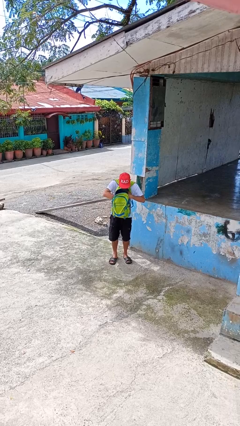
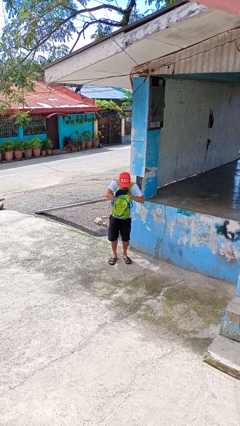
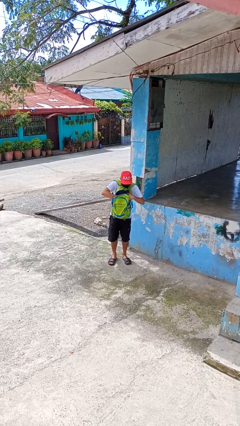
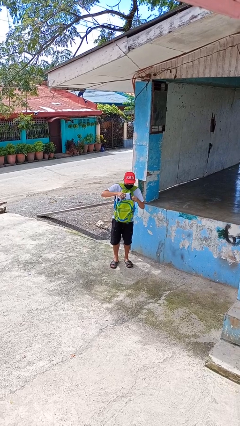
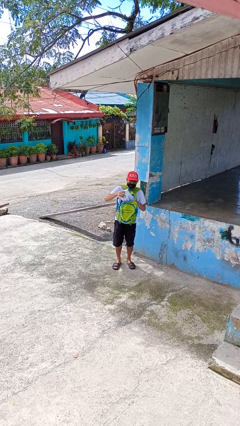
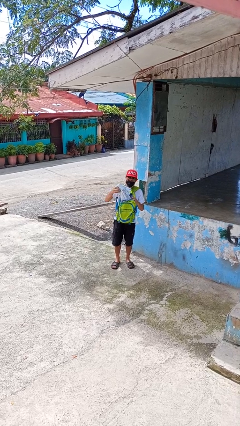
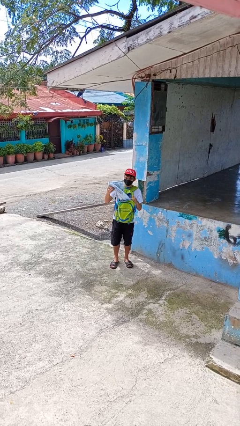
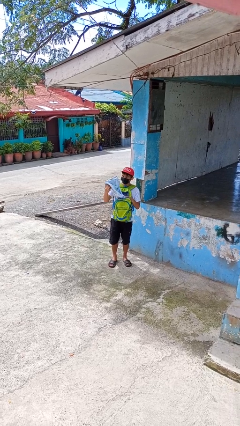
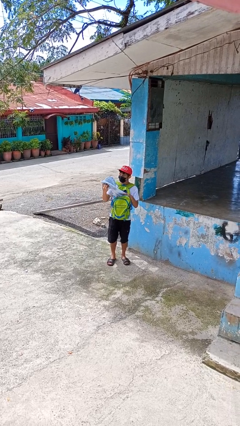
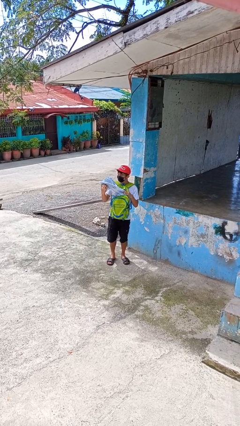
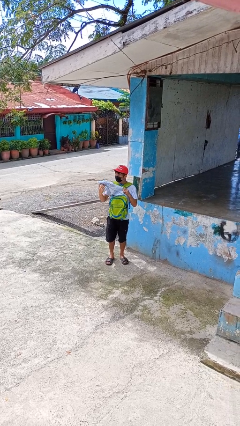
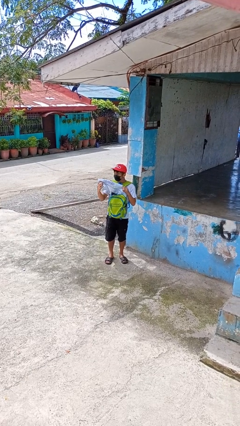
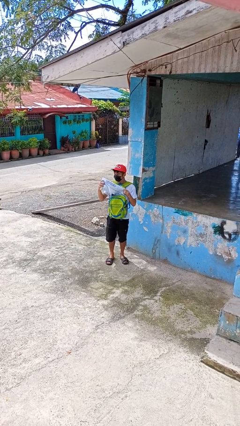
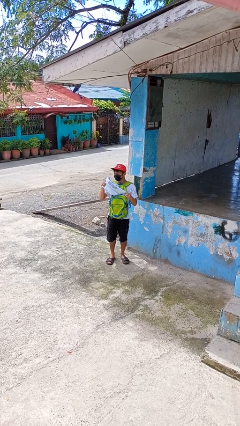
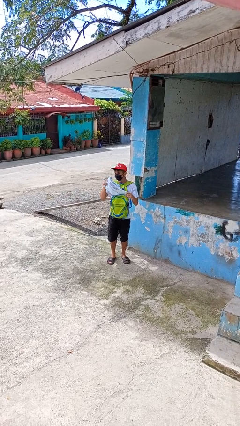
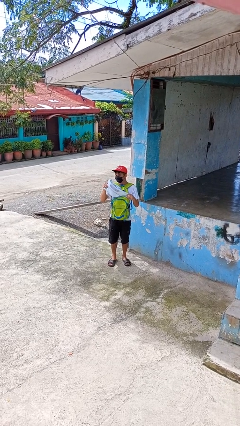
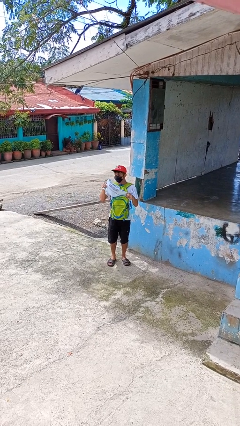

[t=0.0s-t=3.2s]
person takes object from backpack

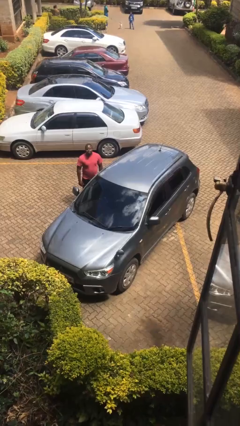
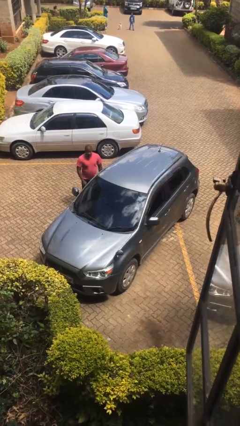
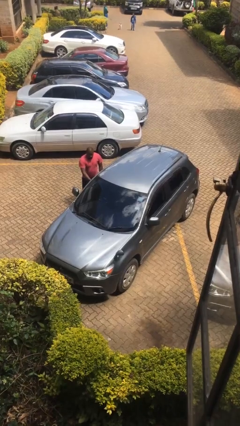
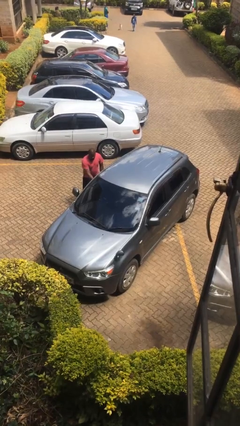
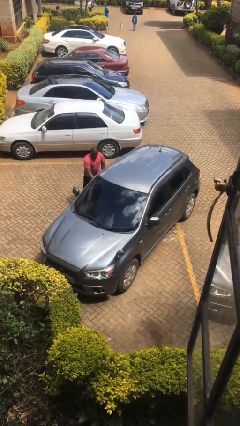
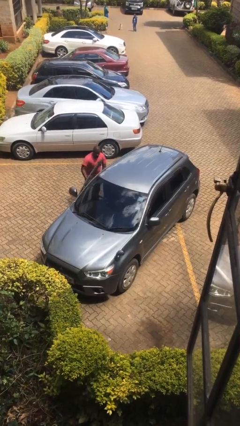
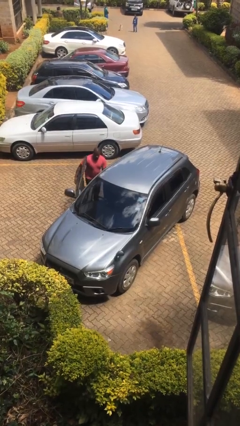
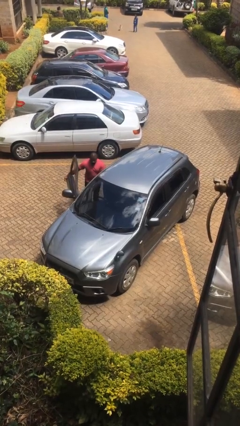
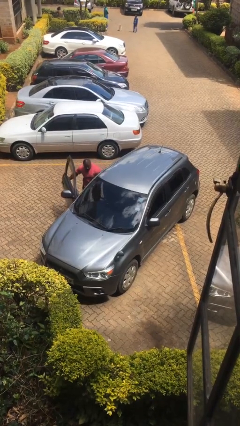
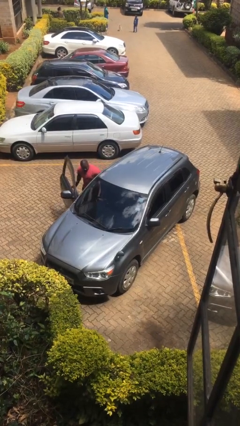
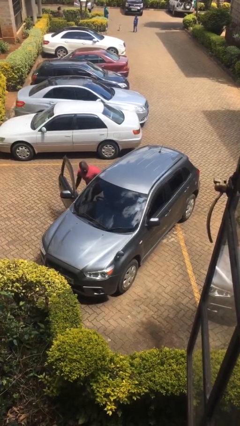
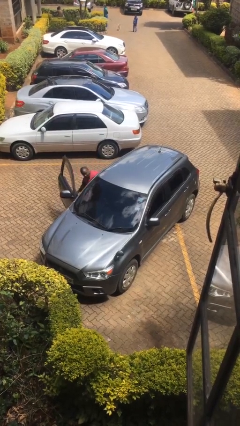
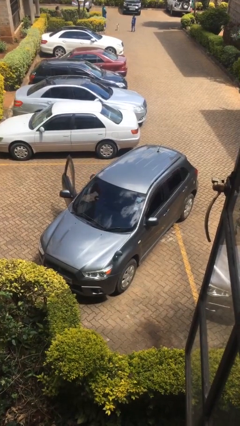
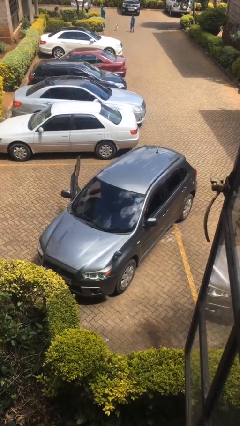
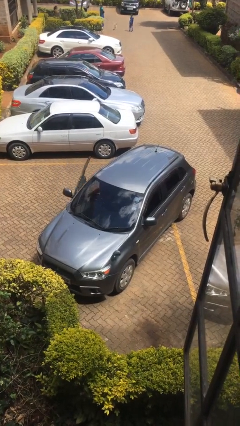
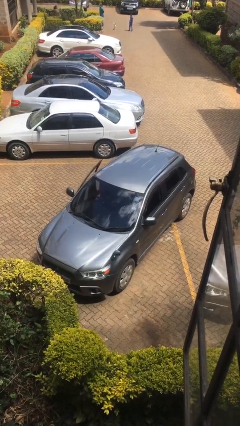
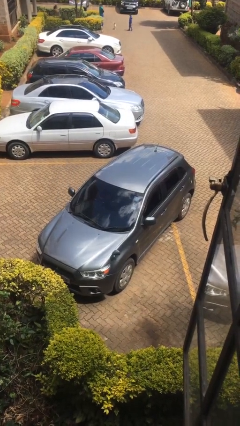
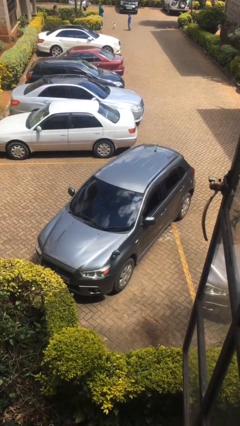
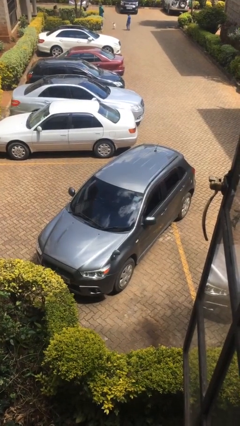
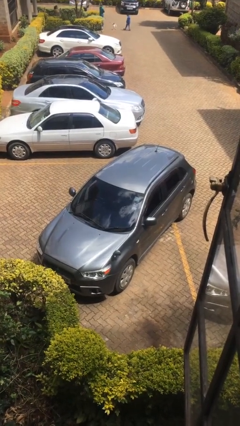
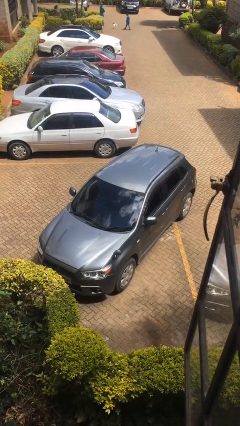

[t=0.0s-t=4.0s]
car picks up person

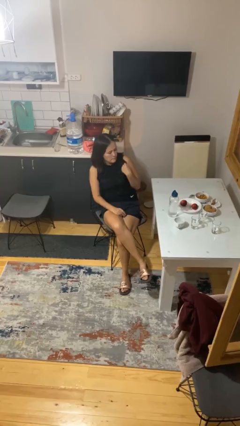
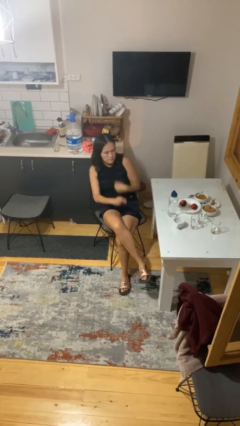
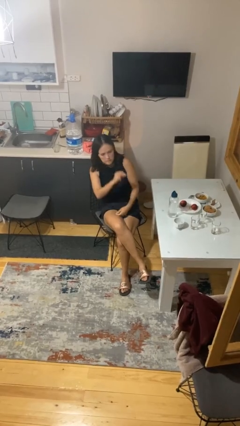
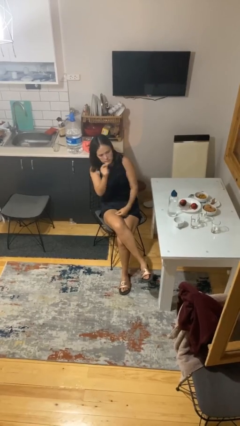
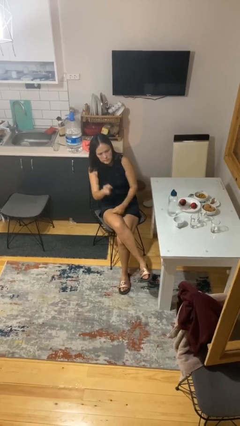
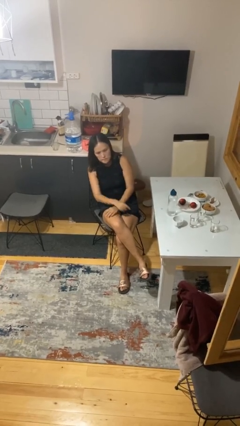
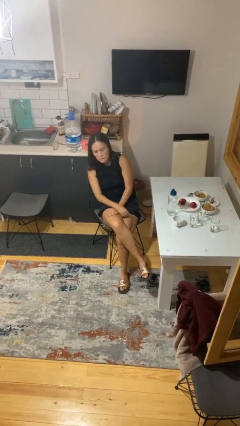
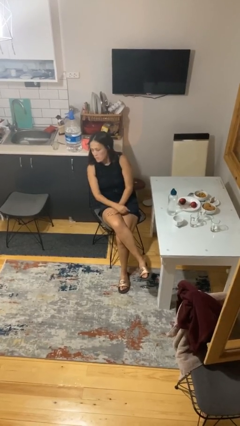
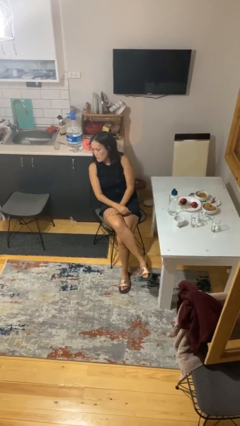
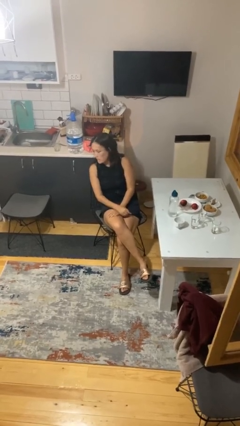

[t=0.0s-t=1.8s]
person snaps fingers

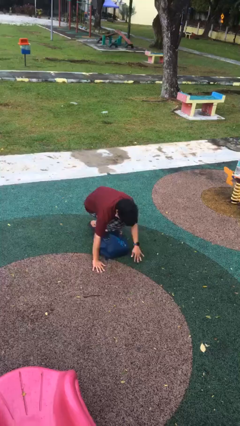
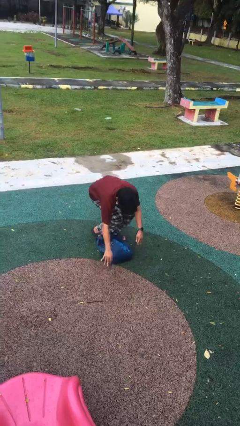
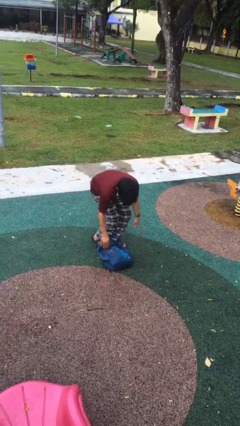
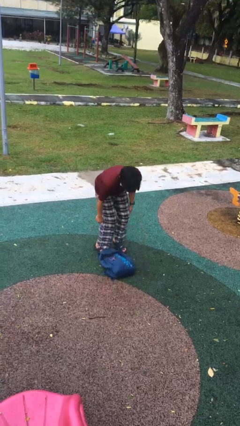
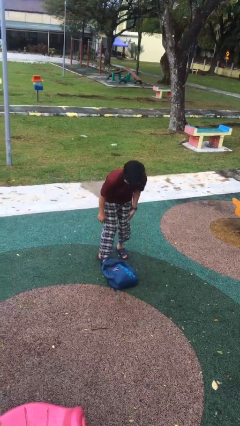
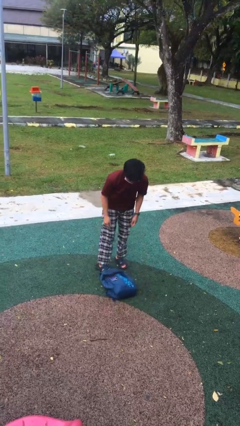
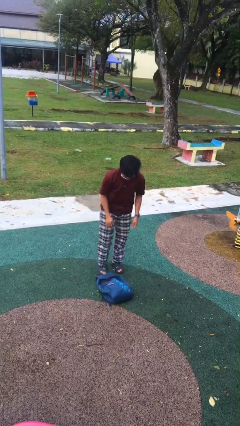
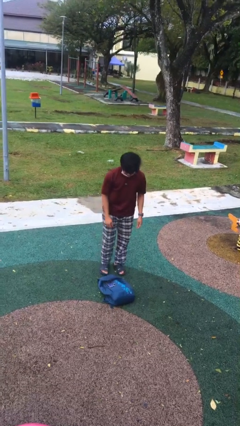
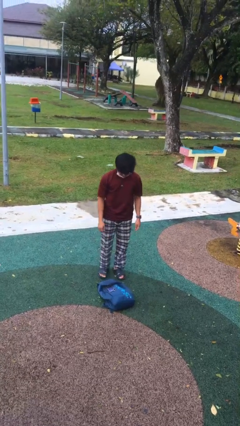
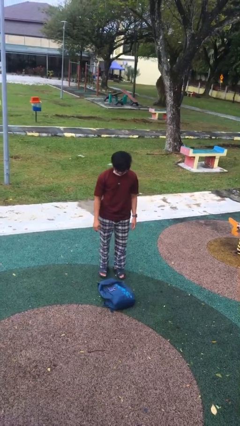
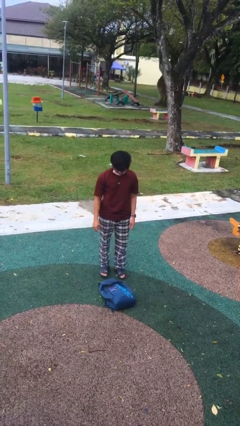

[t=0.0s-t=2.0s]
person stands up from floor

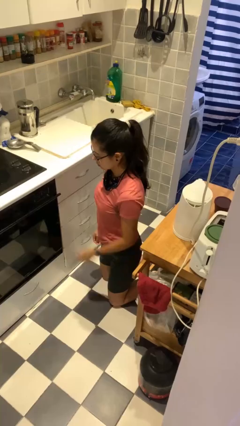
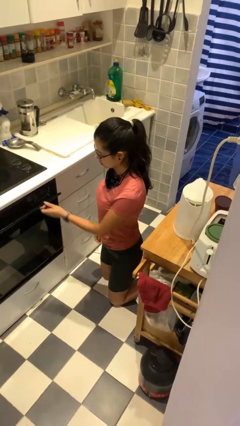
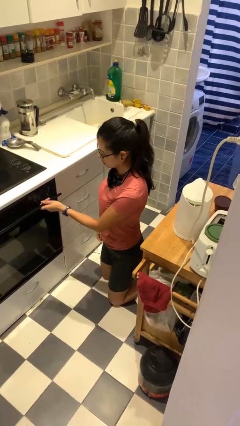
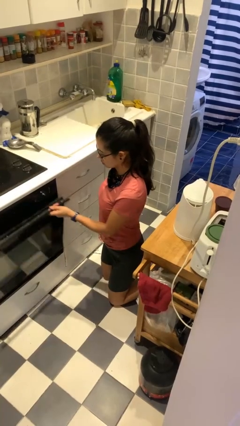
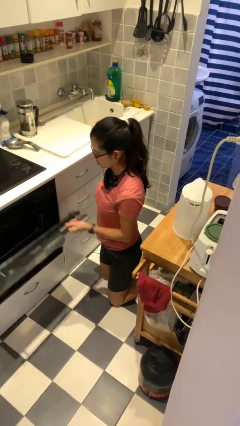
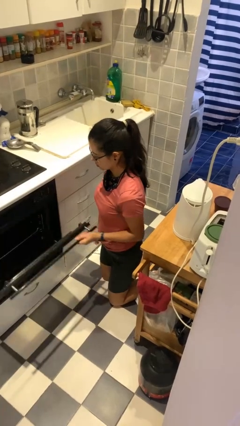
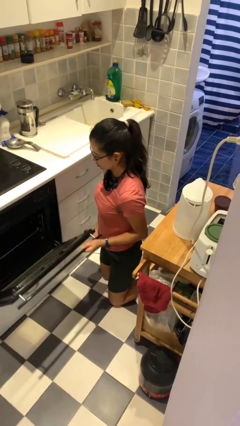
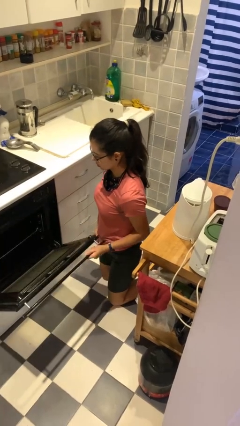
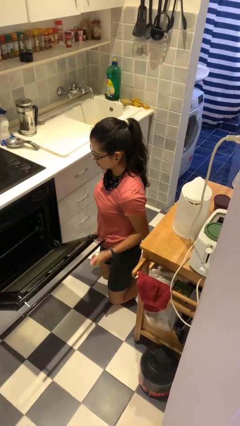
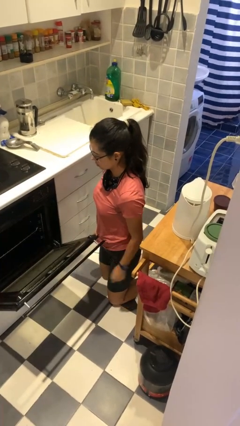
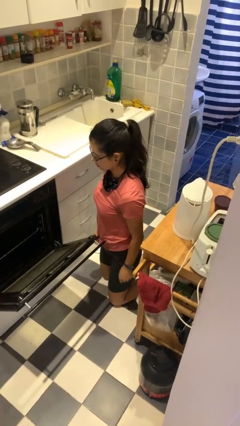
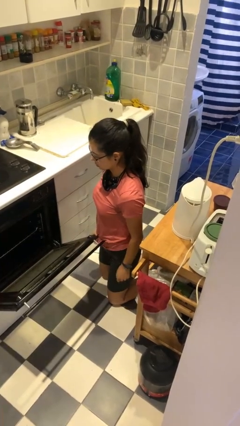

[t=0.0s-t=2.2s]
person opens oven door

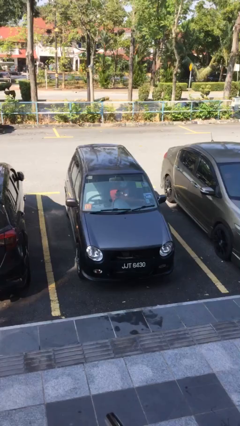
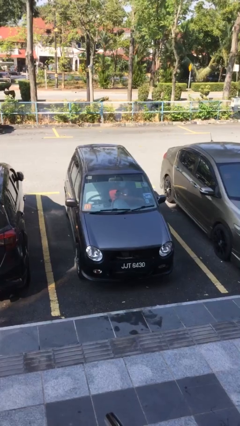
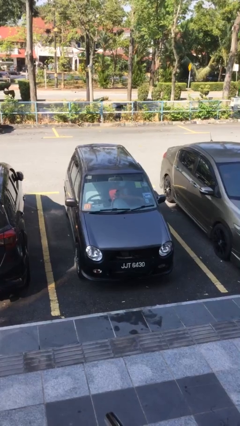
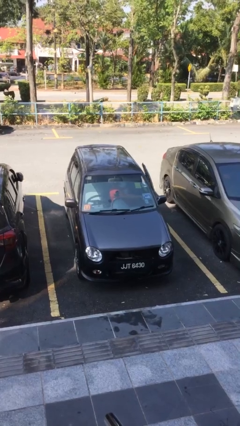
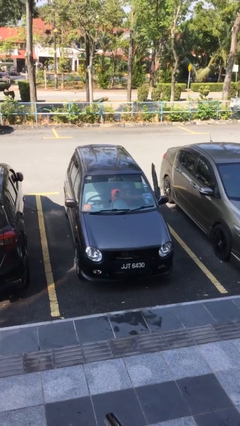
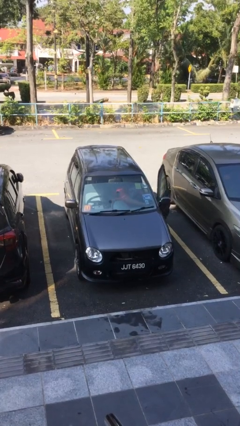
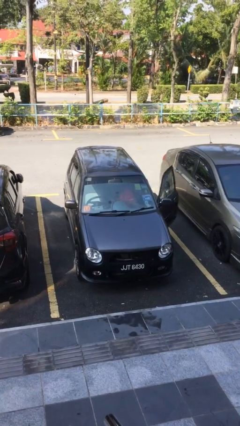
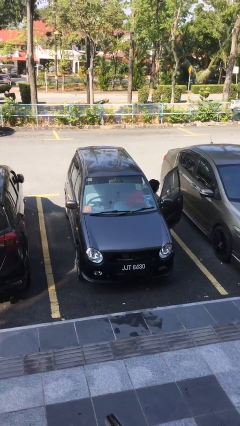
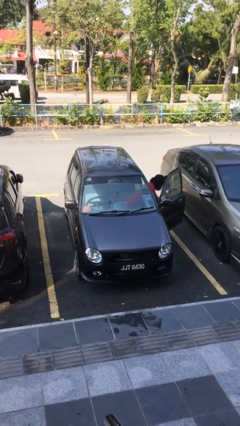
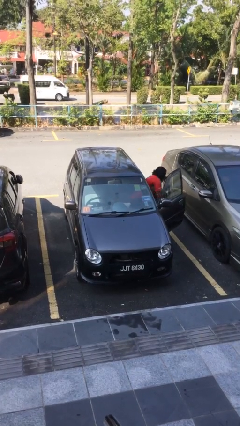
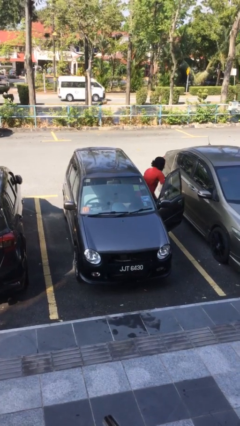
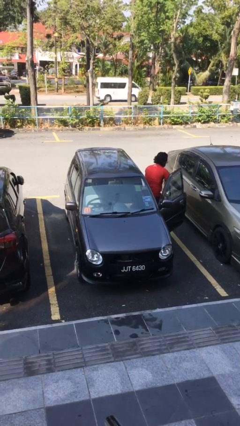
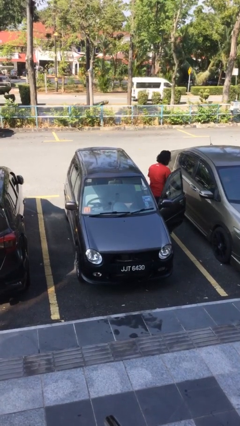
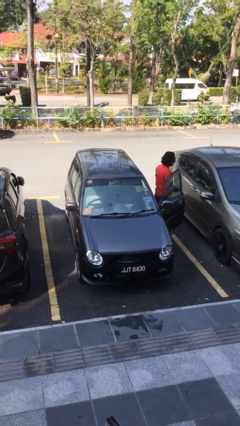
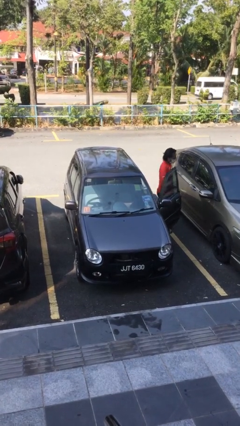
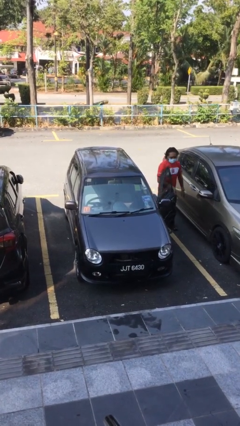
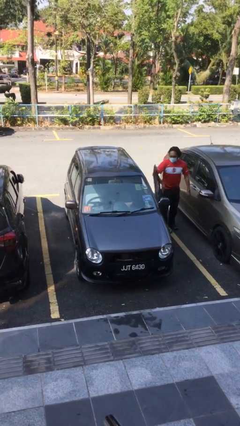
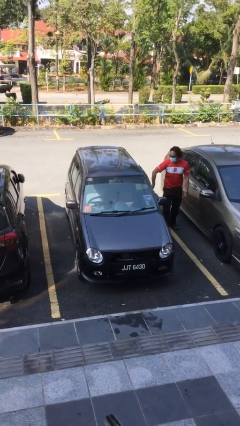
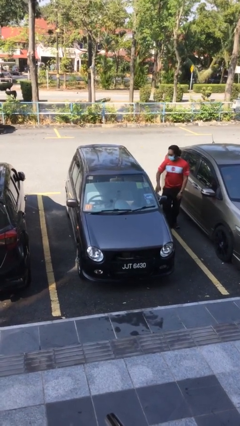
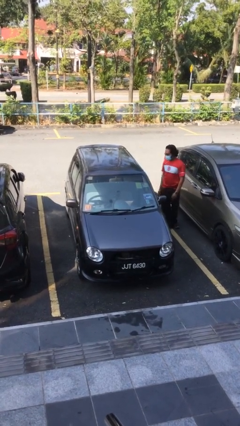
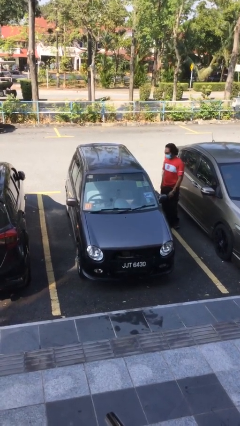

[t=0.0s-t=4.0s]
car drops off person
